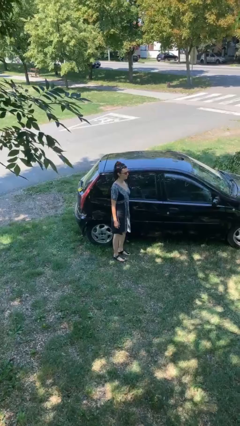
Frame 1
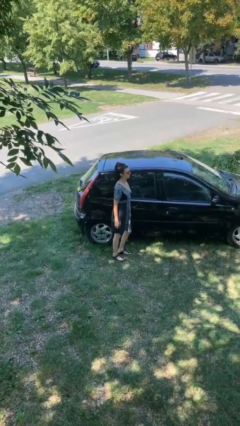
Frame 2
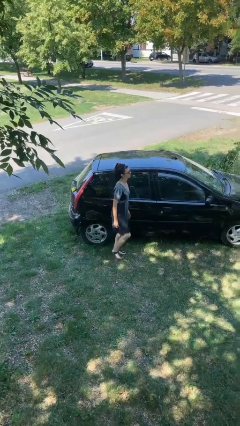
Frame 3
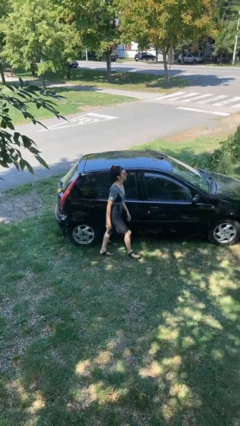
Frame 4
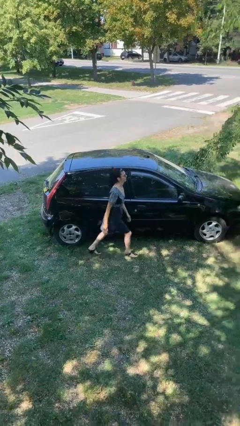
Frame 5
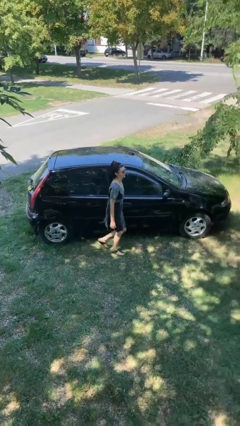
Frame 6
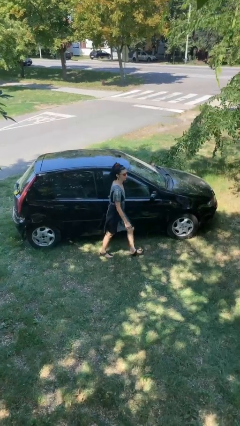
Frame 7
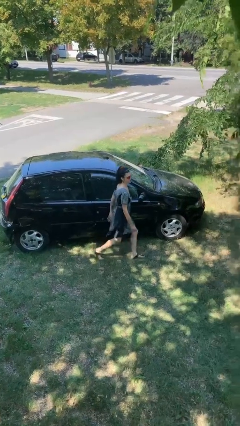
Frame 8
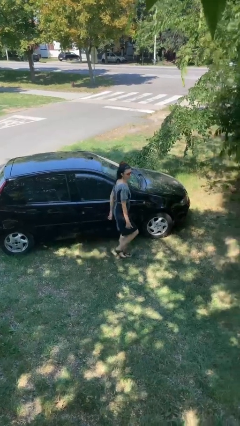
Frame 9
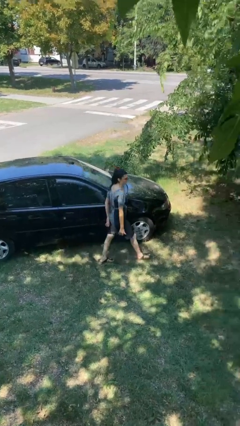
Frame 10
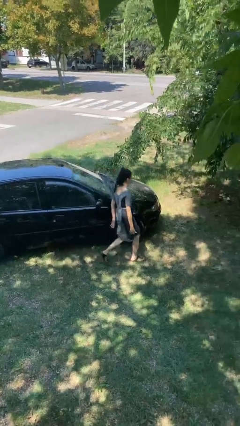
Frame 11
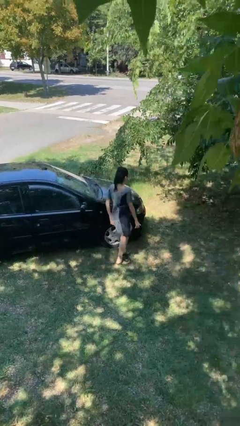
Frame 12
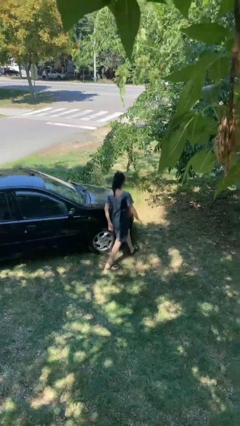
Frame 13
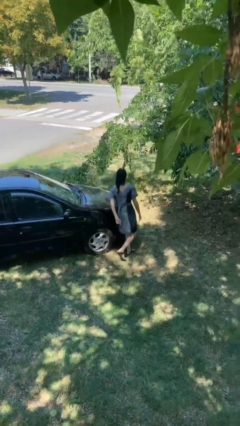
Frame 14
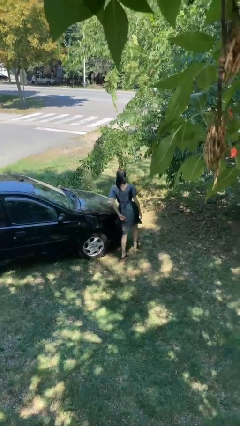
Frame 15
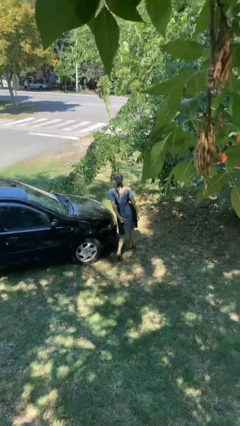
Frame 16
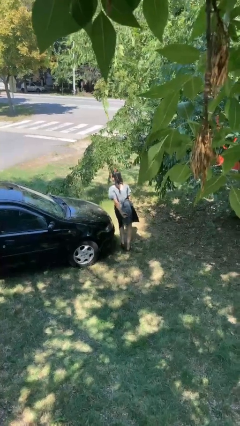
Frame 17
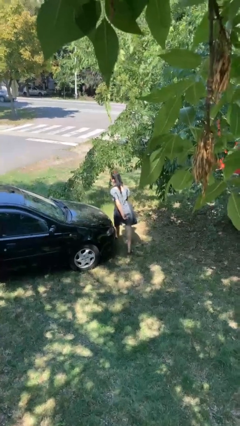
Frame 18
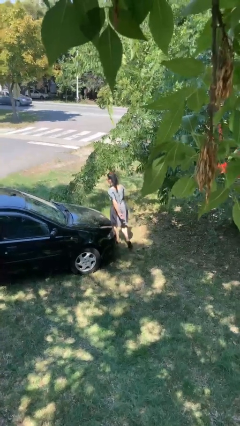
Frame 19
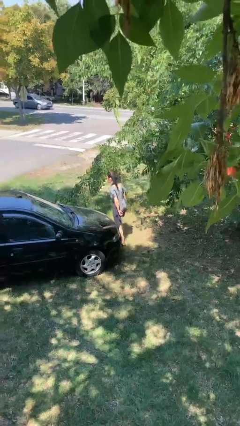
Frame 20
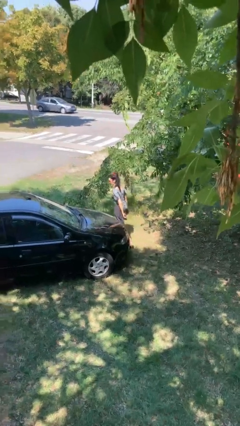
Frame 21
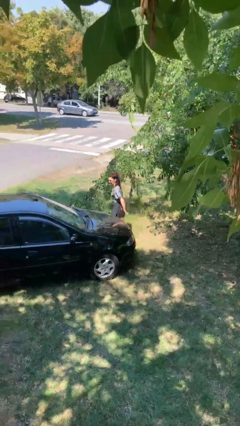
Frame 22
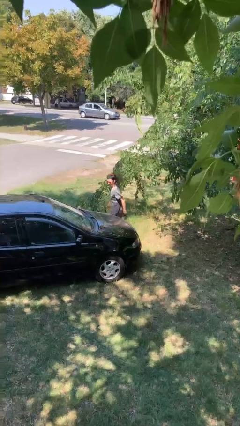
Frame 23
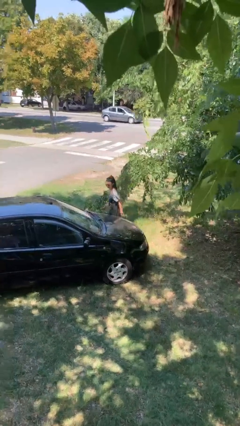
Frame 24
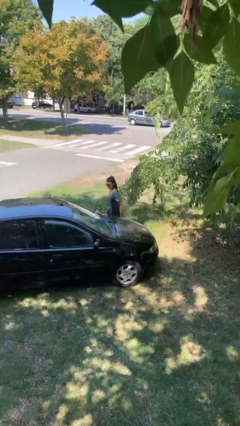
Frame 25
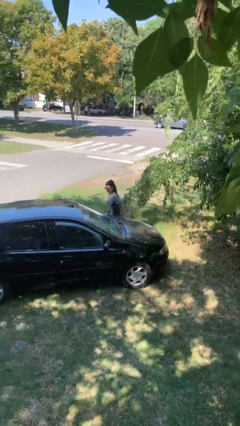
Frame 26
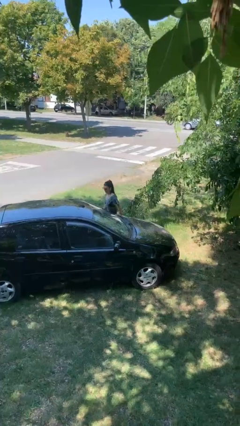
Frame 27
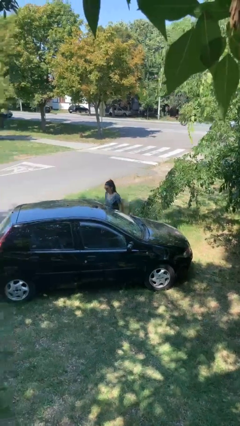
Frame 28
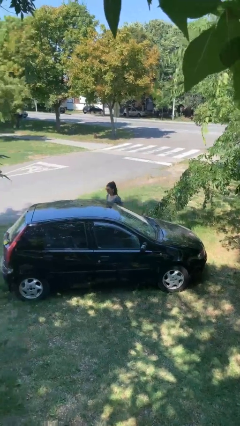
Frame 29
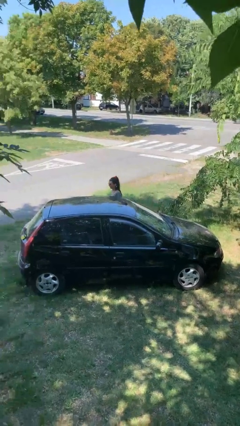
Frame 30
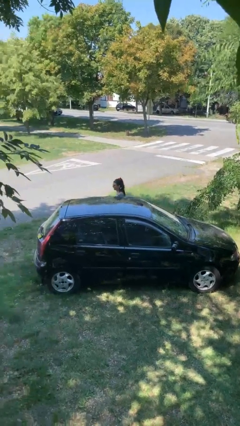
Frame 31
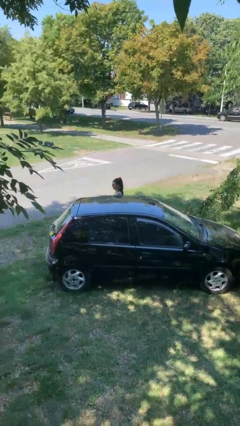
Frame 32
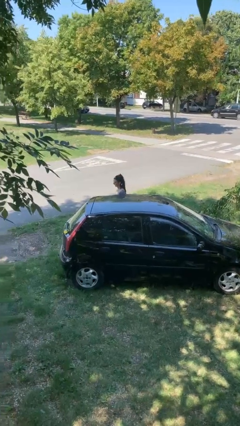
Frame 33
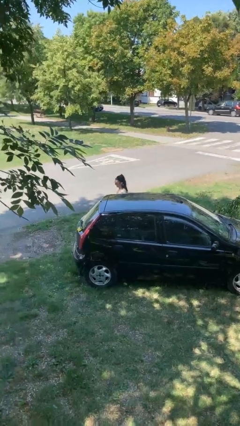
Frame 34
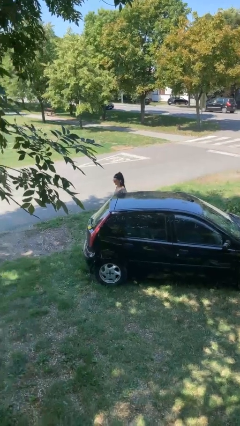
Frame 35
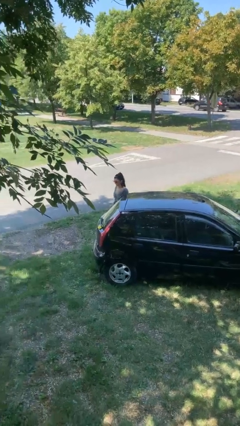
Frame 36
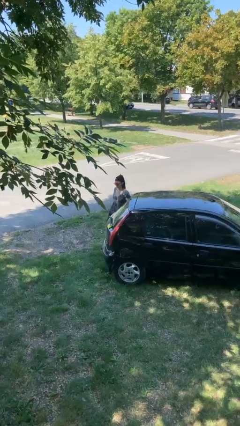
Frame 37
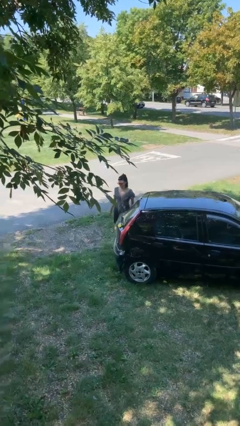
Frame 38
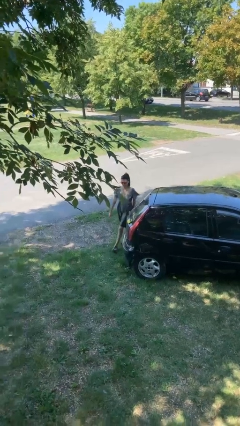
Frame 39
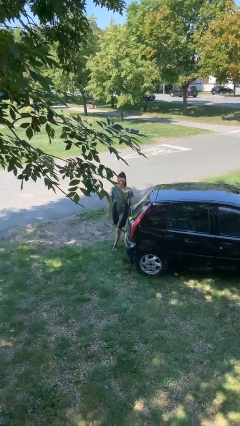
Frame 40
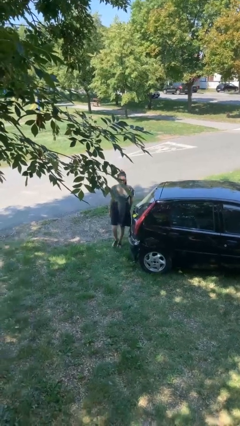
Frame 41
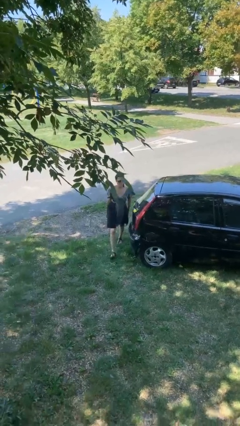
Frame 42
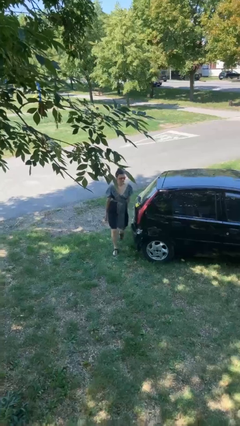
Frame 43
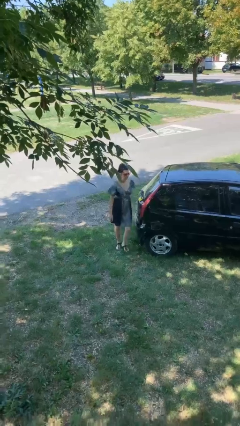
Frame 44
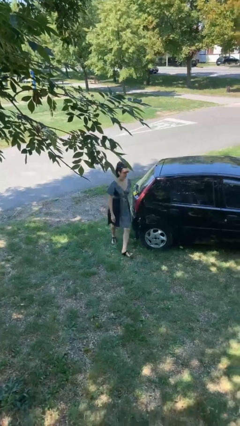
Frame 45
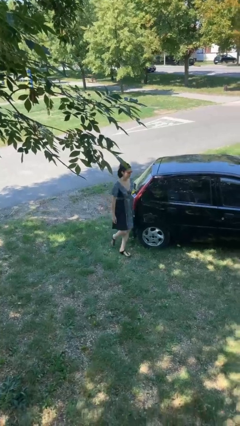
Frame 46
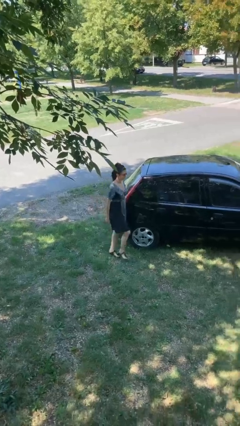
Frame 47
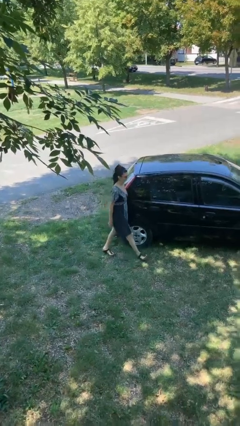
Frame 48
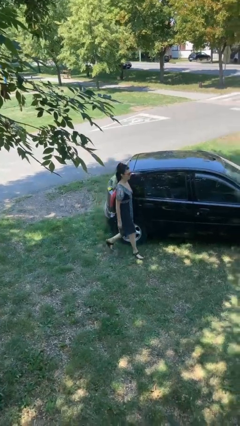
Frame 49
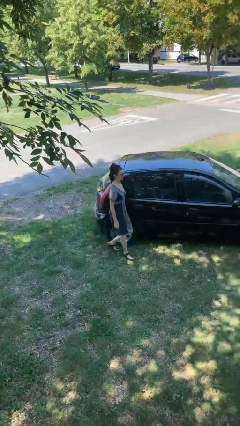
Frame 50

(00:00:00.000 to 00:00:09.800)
person walks around car

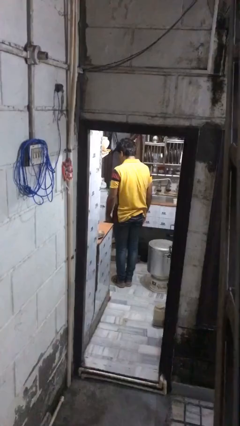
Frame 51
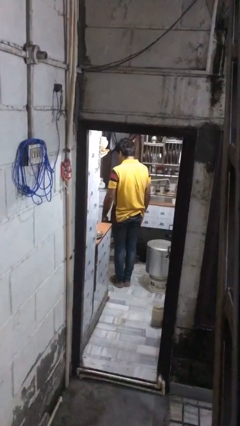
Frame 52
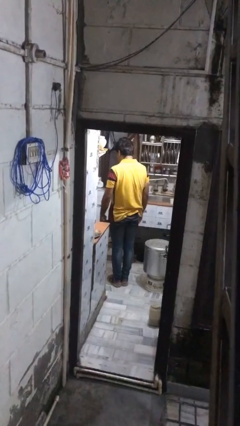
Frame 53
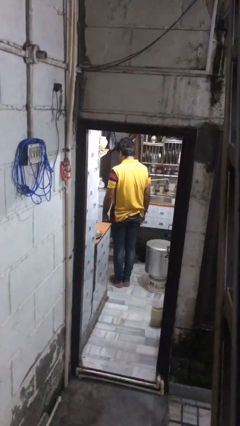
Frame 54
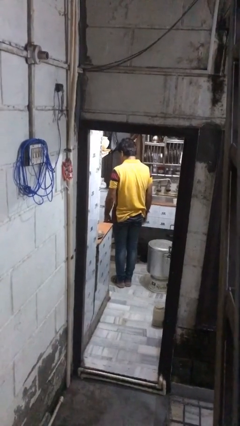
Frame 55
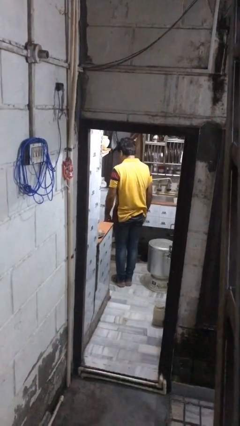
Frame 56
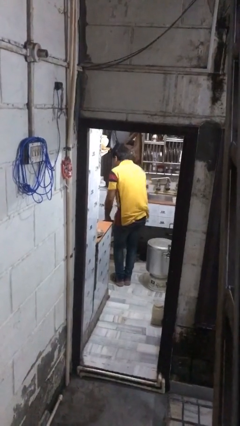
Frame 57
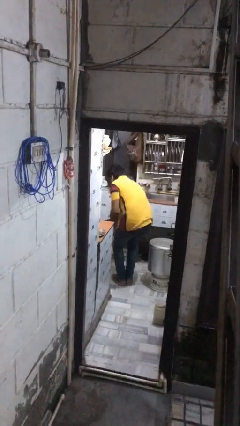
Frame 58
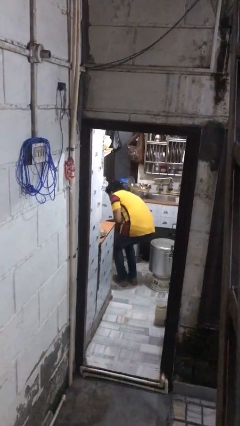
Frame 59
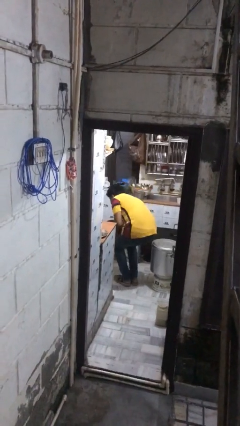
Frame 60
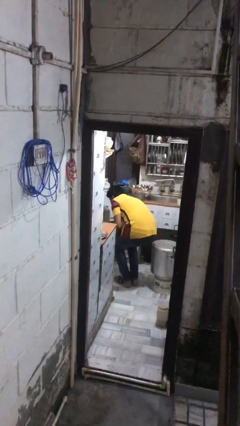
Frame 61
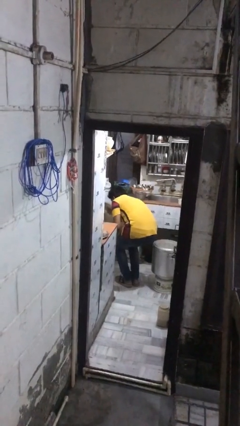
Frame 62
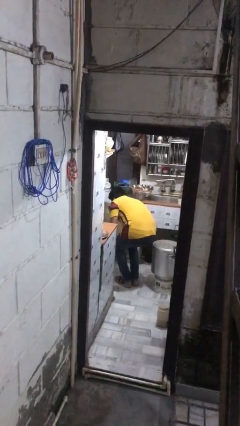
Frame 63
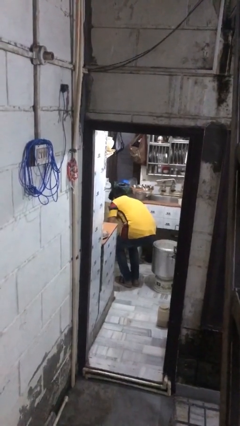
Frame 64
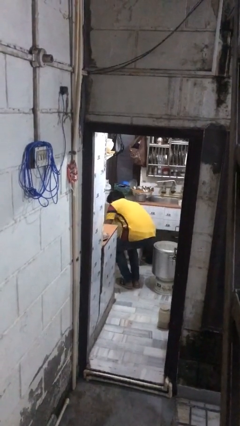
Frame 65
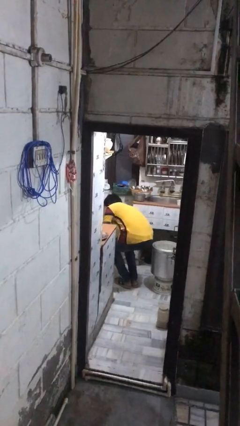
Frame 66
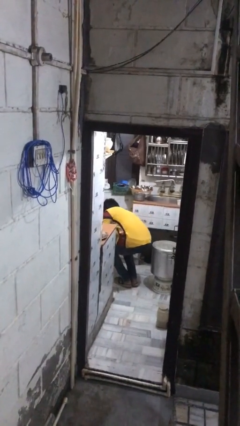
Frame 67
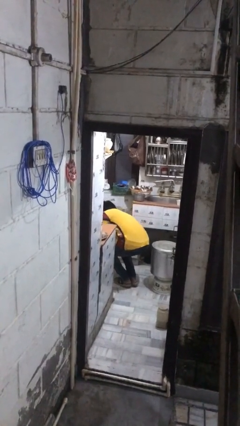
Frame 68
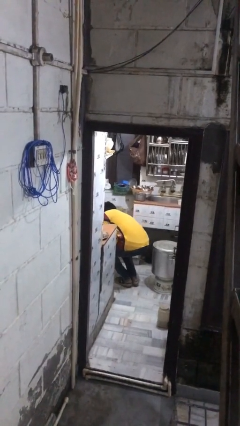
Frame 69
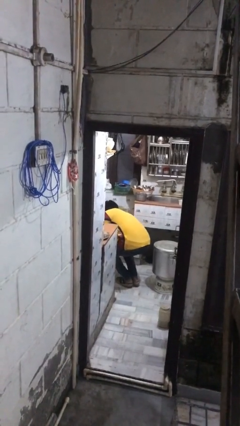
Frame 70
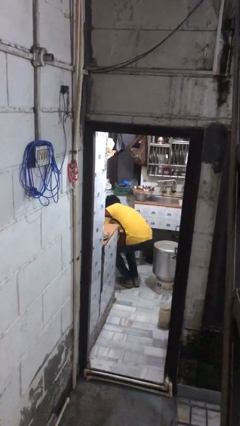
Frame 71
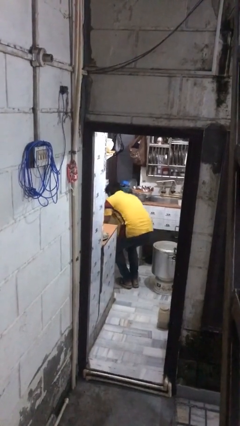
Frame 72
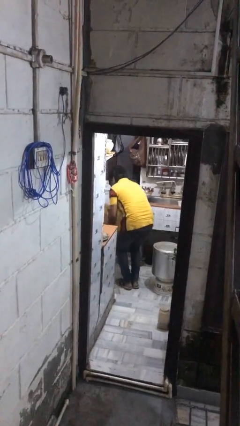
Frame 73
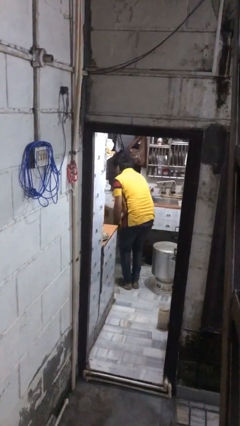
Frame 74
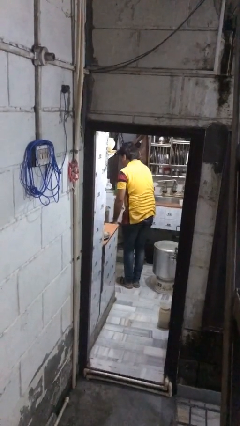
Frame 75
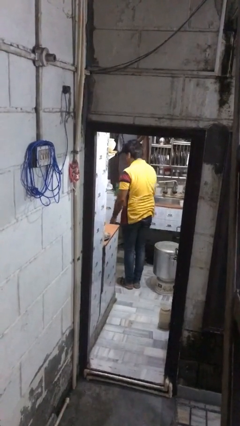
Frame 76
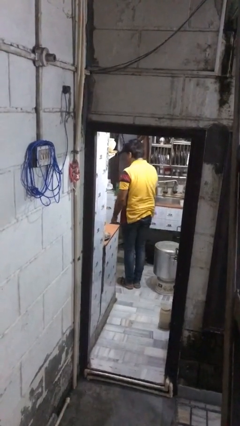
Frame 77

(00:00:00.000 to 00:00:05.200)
person searches in kitchen drawer

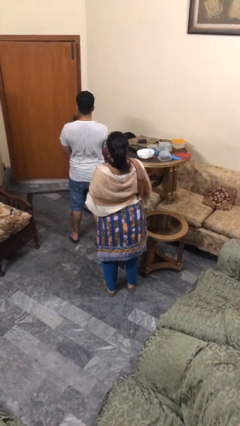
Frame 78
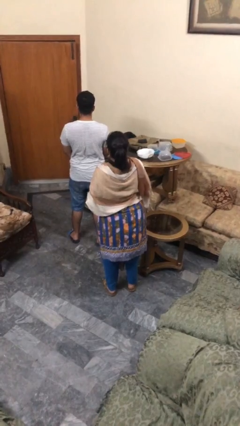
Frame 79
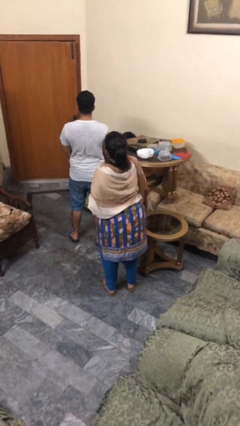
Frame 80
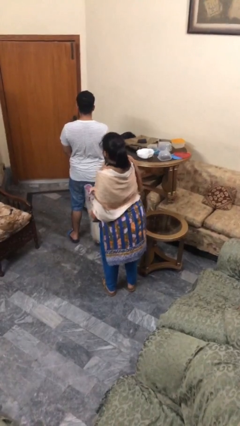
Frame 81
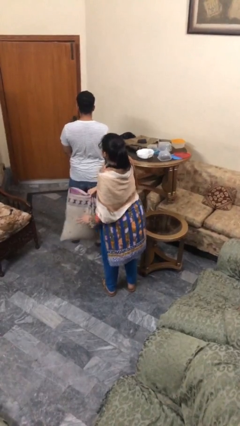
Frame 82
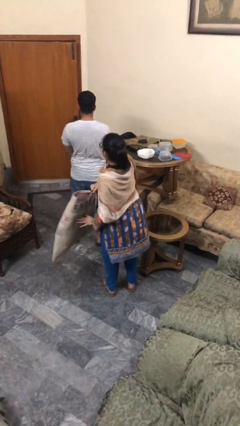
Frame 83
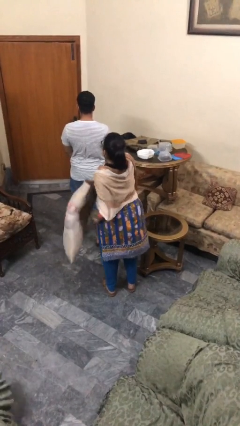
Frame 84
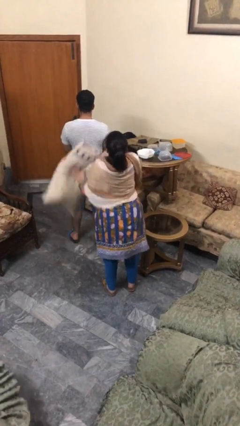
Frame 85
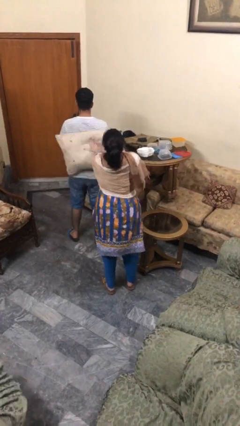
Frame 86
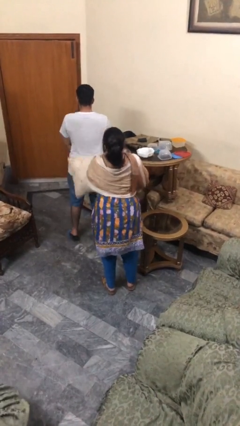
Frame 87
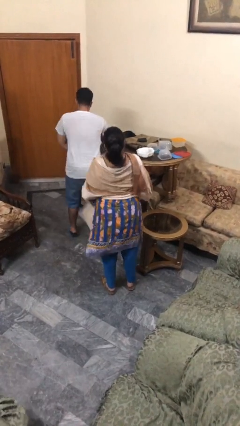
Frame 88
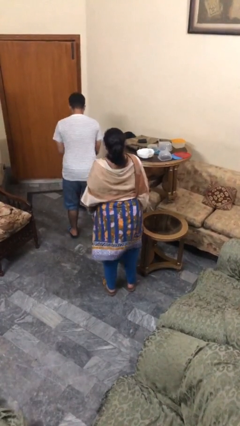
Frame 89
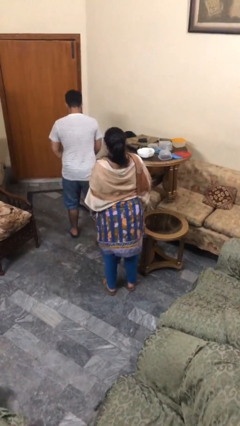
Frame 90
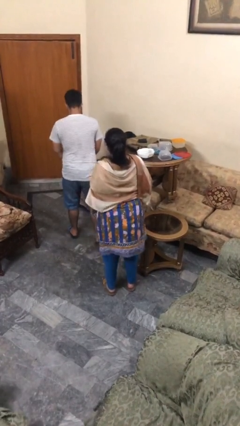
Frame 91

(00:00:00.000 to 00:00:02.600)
person hits person with pillow
